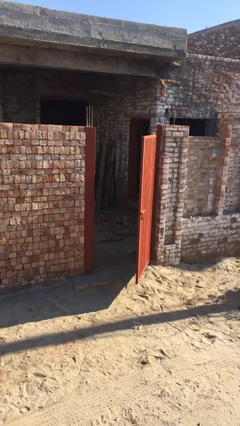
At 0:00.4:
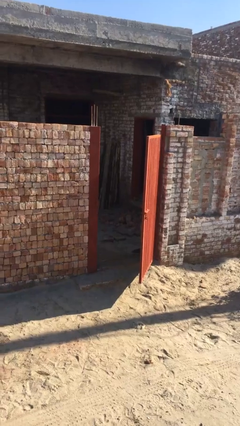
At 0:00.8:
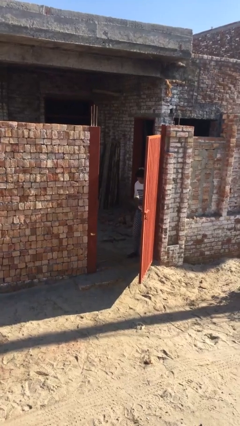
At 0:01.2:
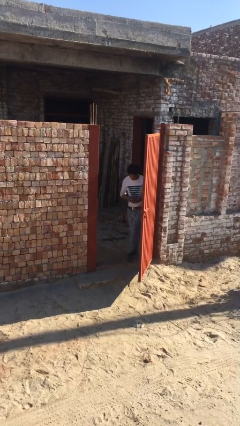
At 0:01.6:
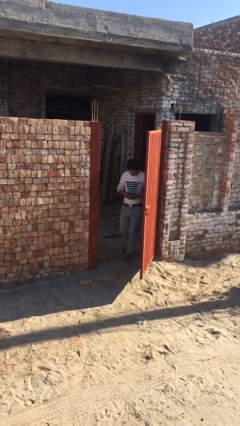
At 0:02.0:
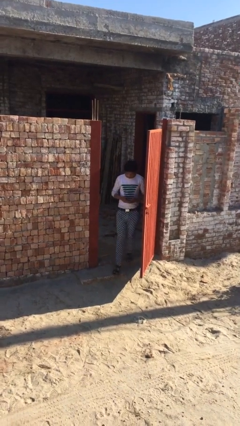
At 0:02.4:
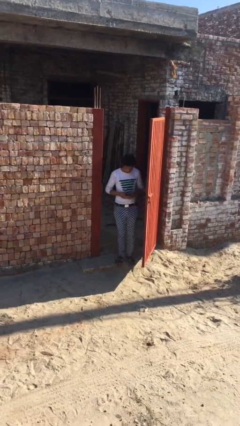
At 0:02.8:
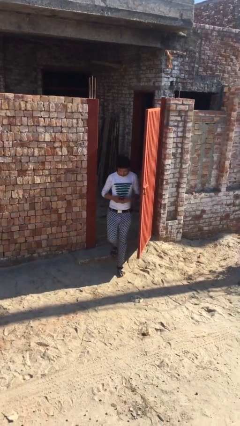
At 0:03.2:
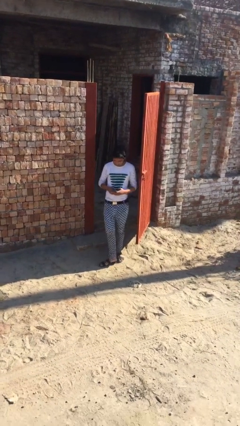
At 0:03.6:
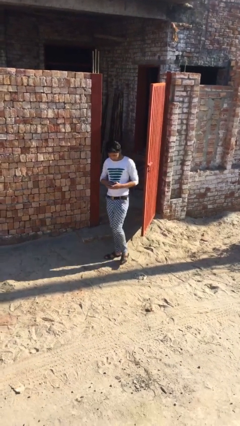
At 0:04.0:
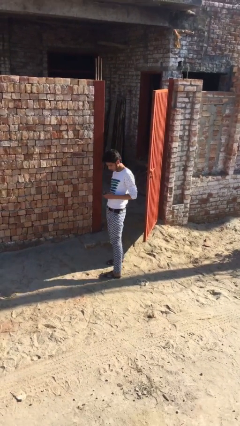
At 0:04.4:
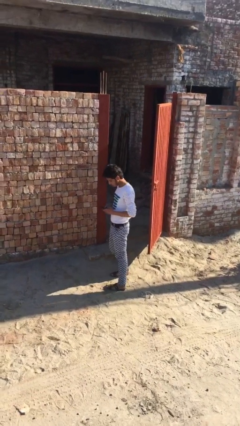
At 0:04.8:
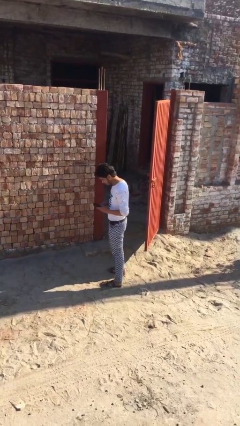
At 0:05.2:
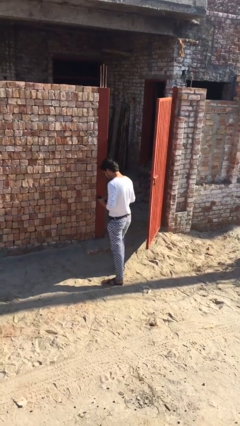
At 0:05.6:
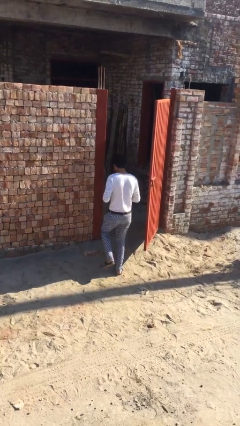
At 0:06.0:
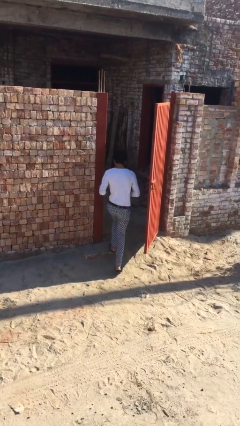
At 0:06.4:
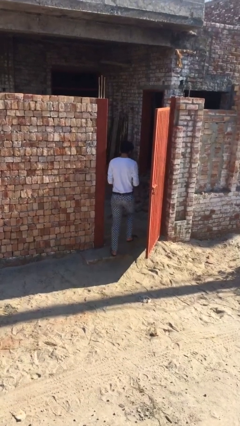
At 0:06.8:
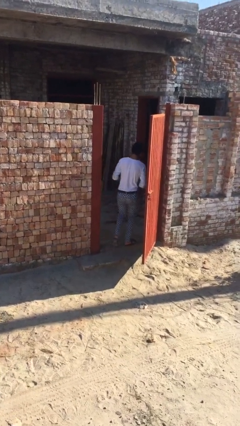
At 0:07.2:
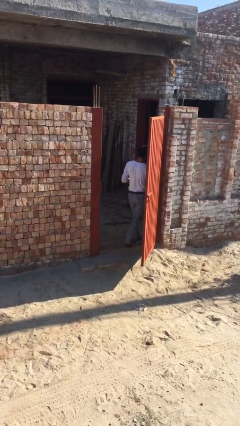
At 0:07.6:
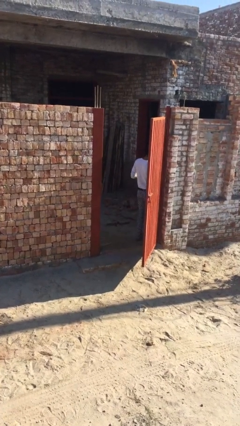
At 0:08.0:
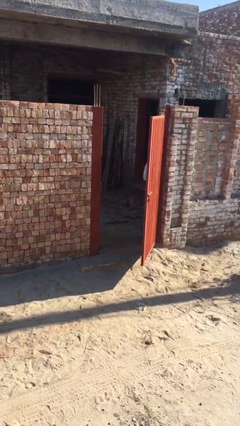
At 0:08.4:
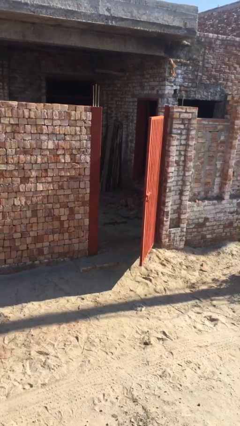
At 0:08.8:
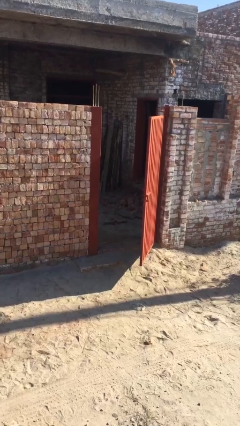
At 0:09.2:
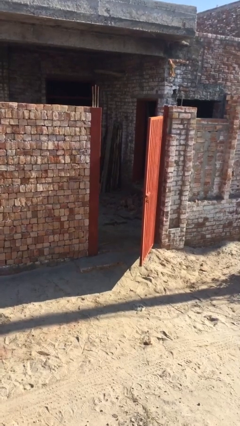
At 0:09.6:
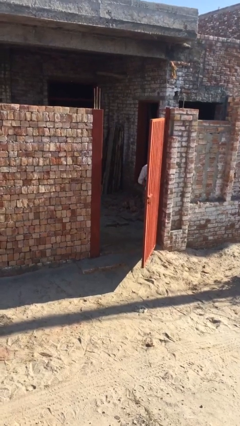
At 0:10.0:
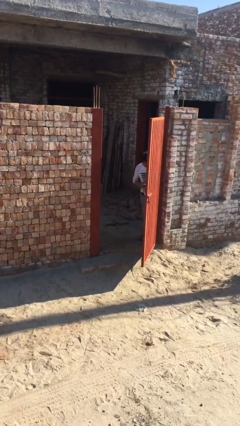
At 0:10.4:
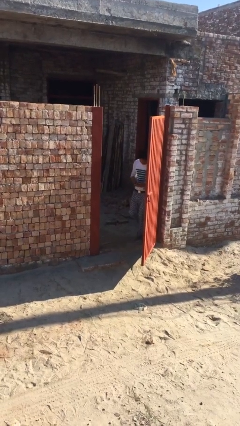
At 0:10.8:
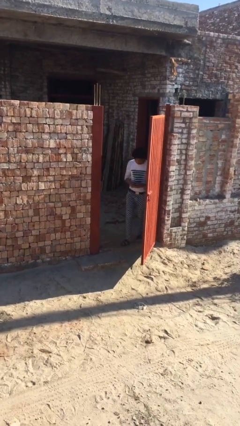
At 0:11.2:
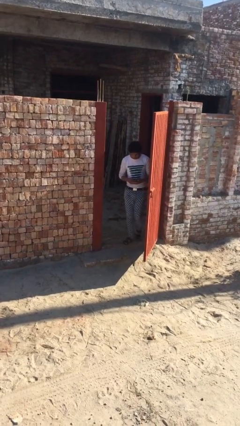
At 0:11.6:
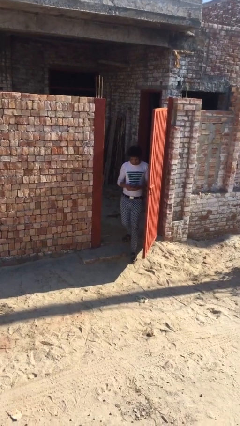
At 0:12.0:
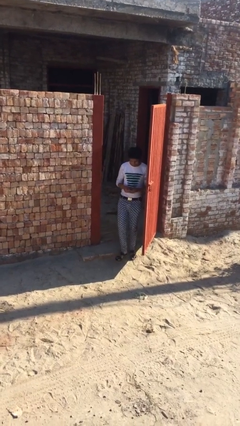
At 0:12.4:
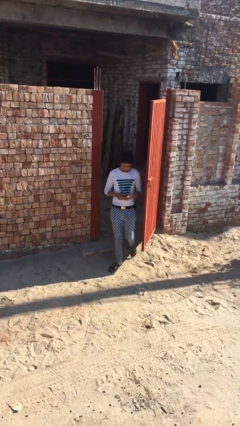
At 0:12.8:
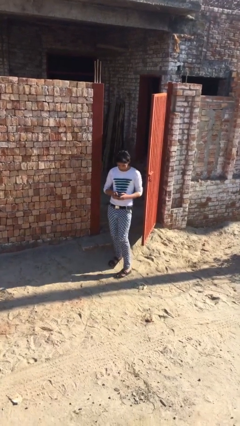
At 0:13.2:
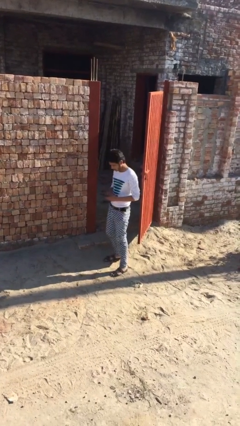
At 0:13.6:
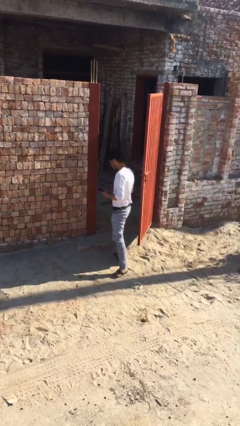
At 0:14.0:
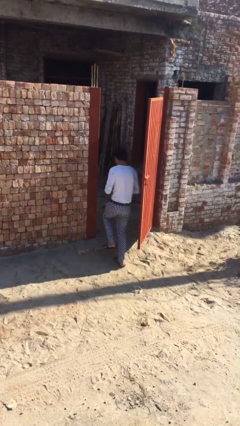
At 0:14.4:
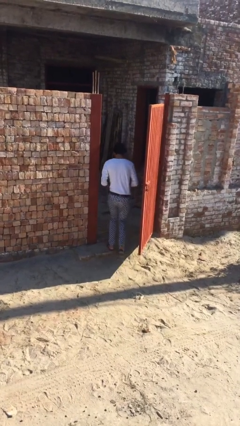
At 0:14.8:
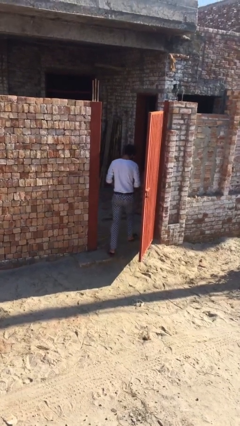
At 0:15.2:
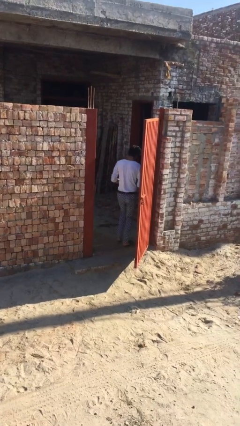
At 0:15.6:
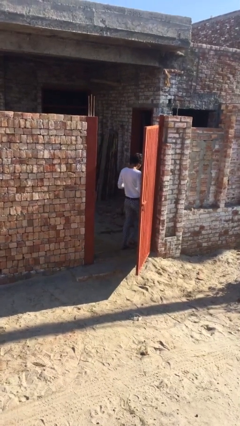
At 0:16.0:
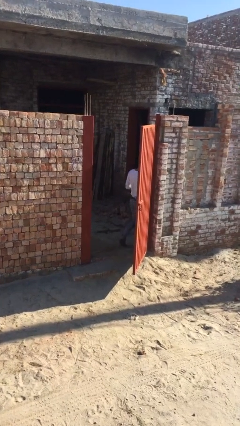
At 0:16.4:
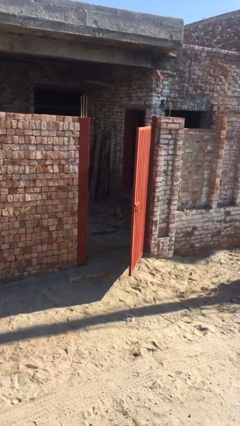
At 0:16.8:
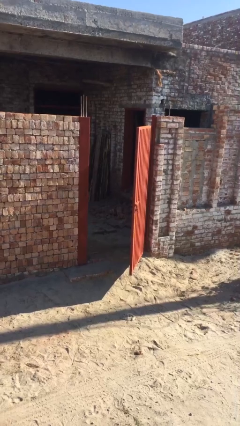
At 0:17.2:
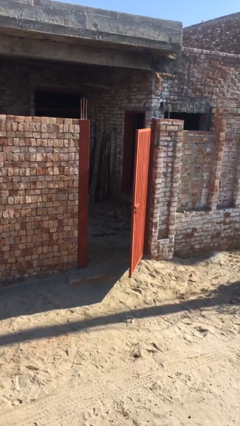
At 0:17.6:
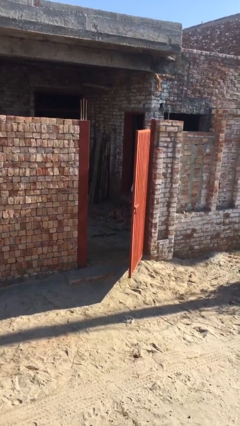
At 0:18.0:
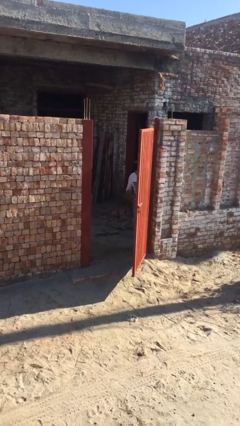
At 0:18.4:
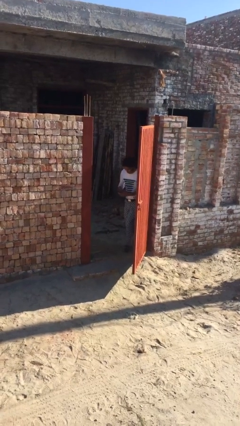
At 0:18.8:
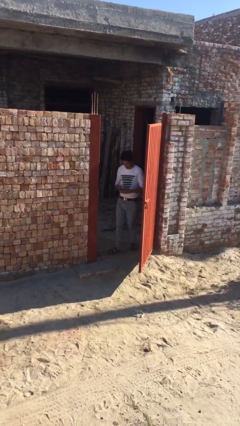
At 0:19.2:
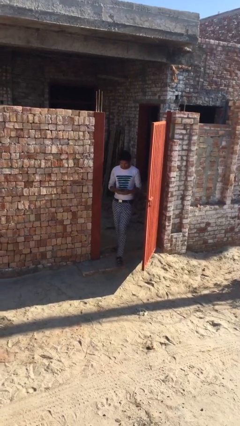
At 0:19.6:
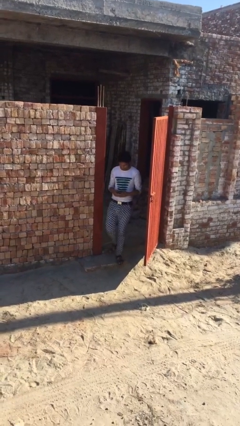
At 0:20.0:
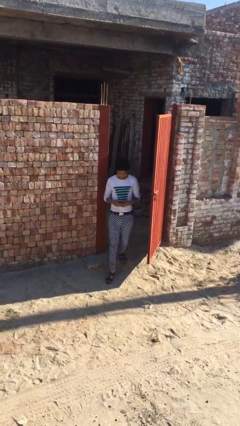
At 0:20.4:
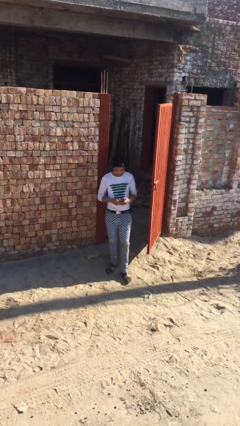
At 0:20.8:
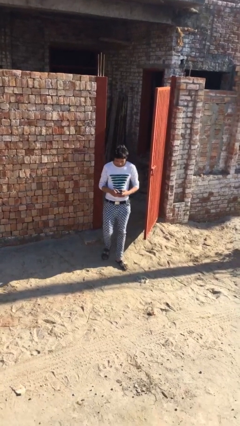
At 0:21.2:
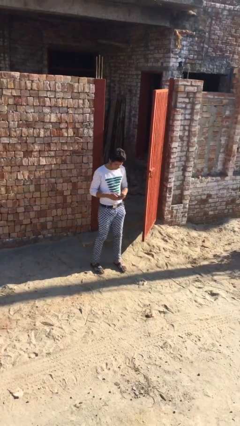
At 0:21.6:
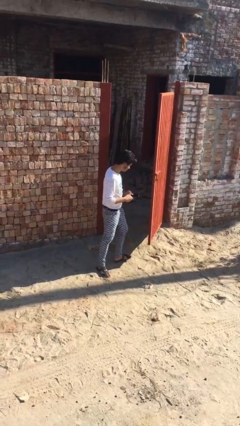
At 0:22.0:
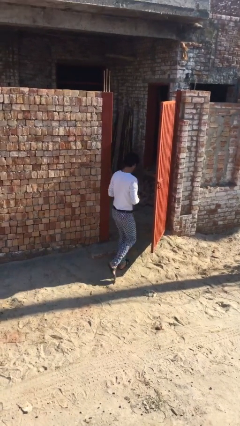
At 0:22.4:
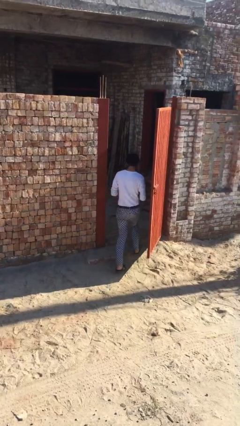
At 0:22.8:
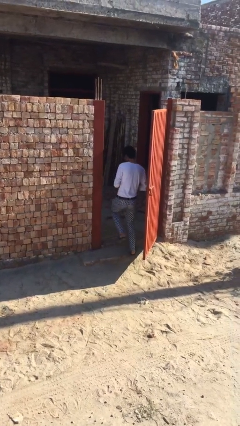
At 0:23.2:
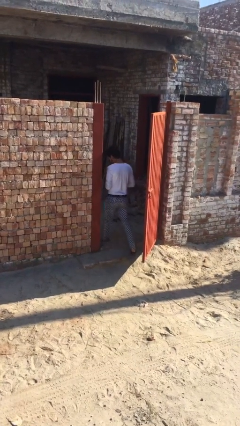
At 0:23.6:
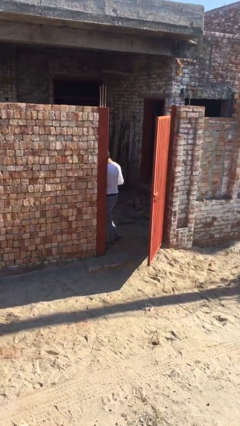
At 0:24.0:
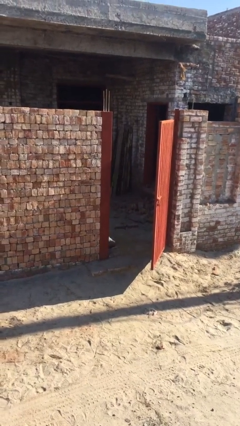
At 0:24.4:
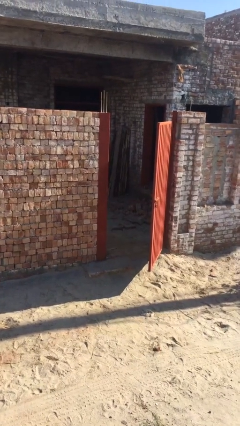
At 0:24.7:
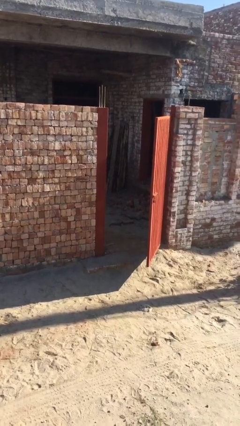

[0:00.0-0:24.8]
person texts on phone

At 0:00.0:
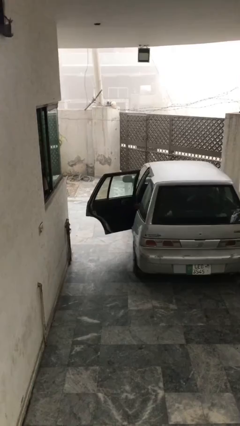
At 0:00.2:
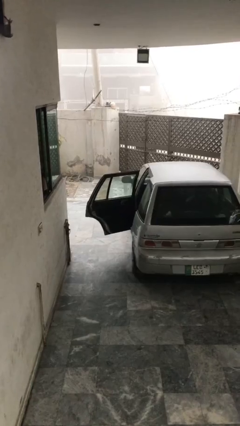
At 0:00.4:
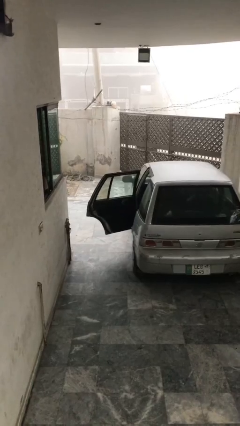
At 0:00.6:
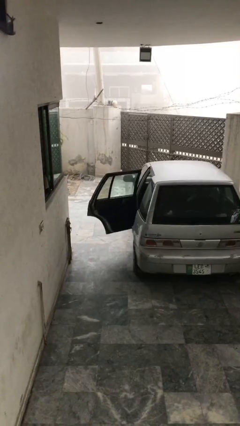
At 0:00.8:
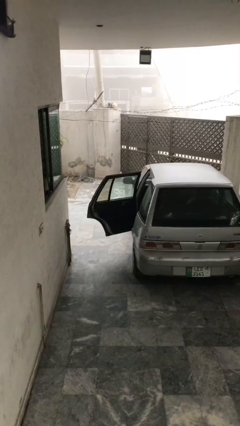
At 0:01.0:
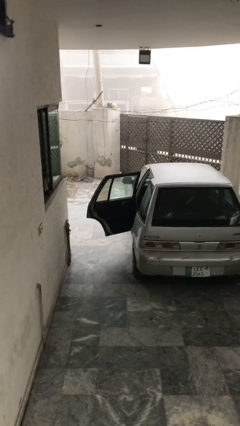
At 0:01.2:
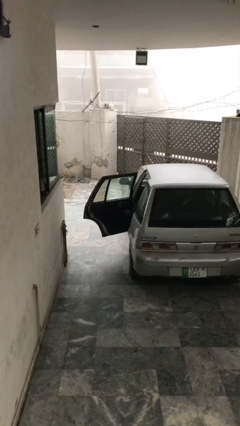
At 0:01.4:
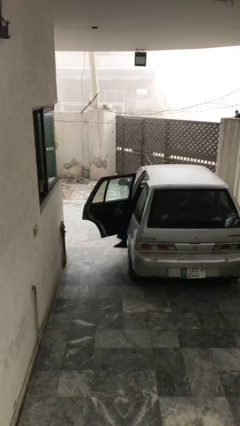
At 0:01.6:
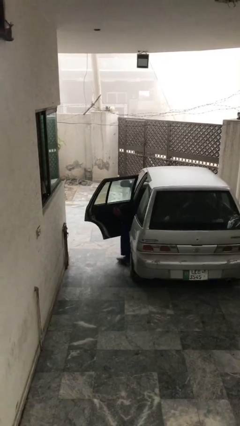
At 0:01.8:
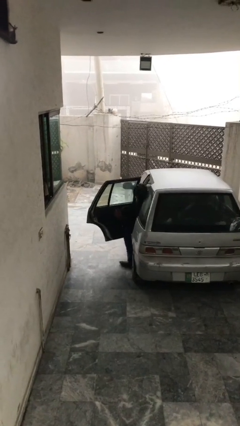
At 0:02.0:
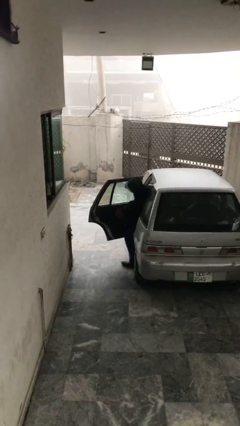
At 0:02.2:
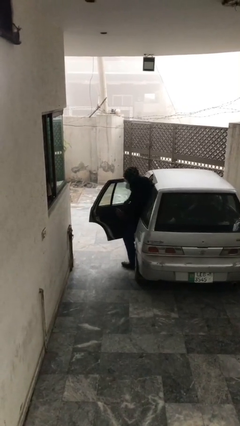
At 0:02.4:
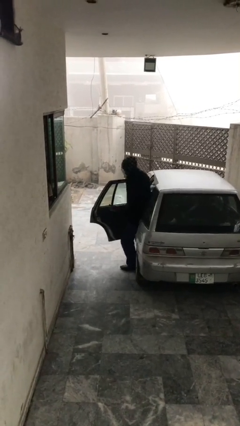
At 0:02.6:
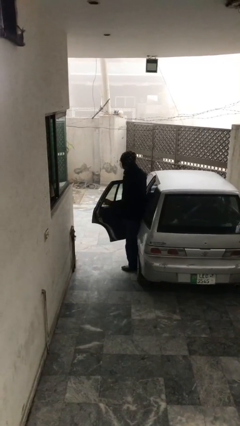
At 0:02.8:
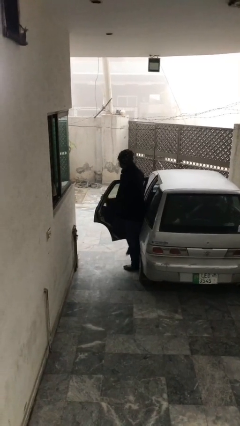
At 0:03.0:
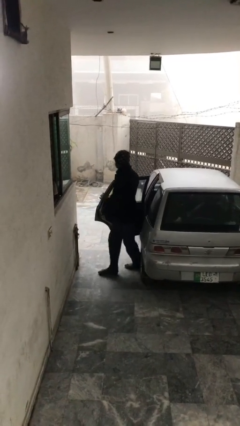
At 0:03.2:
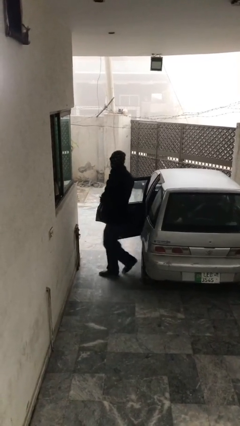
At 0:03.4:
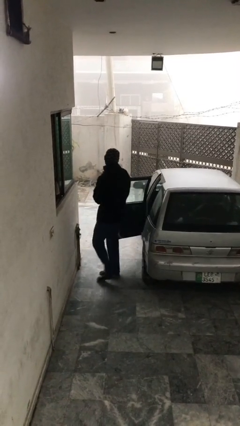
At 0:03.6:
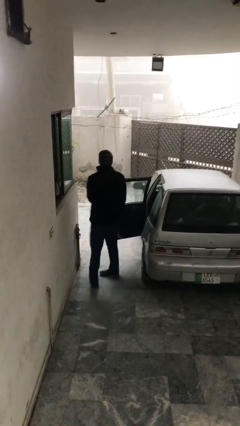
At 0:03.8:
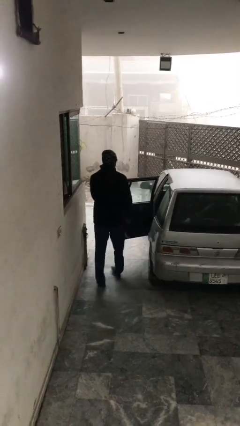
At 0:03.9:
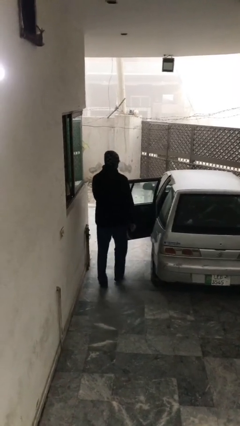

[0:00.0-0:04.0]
person exits car

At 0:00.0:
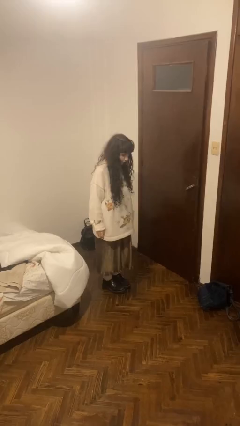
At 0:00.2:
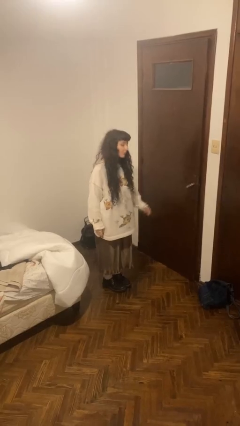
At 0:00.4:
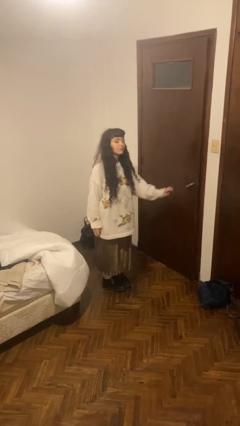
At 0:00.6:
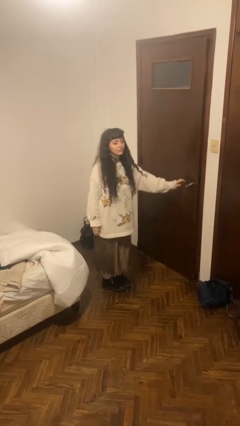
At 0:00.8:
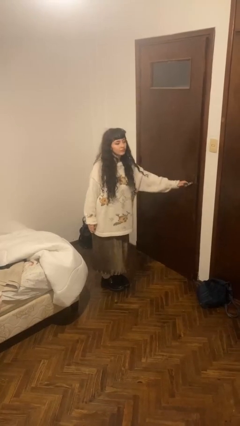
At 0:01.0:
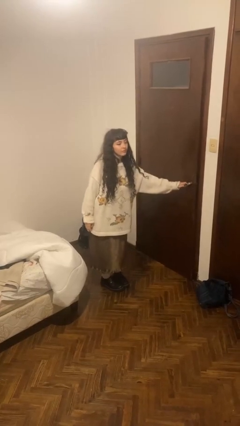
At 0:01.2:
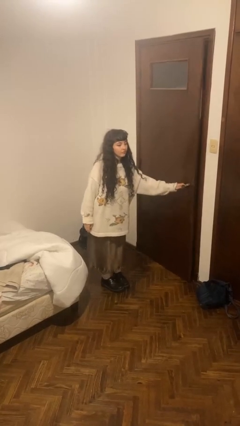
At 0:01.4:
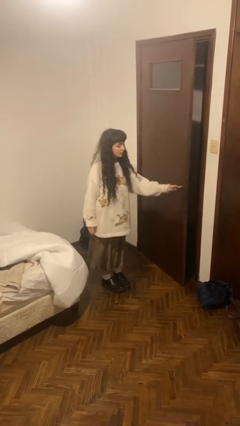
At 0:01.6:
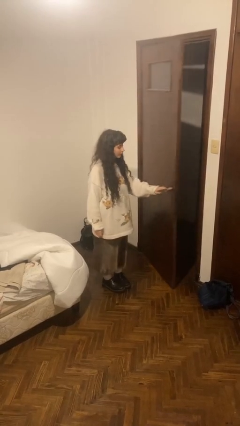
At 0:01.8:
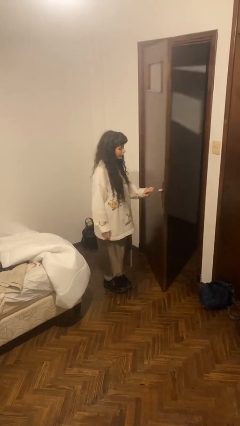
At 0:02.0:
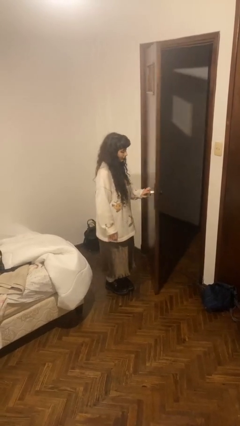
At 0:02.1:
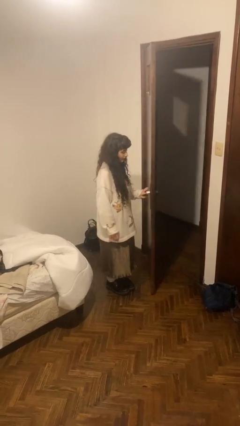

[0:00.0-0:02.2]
person opens facility door
